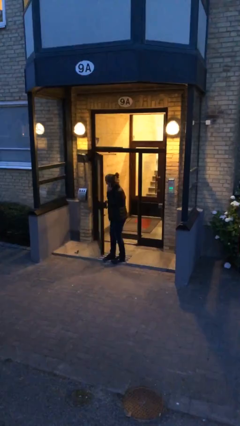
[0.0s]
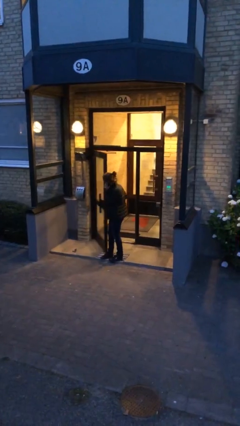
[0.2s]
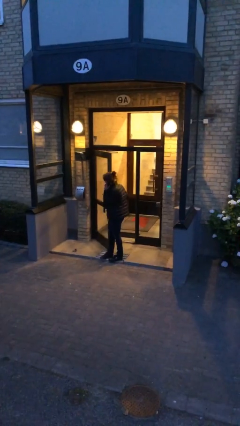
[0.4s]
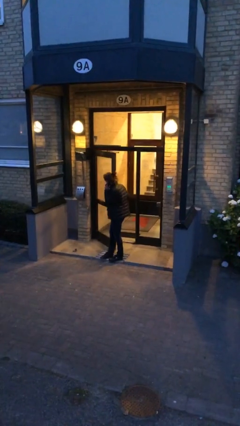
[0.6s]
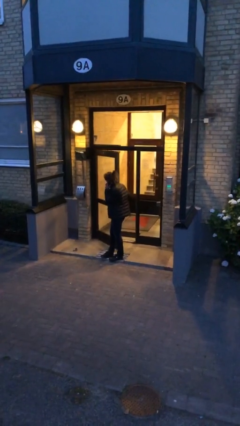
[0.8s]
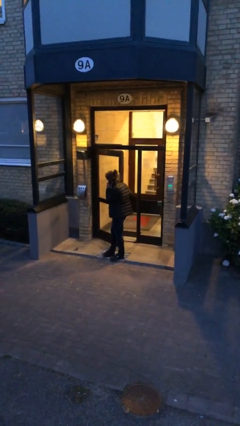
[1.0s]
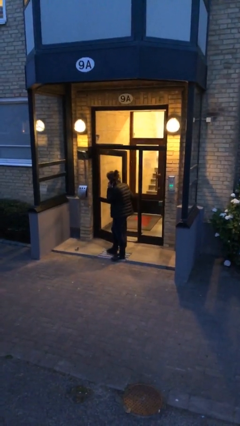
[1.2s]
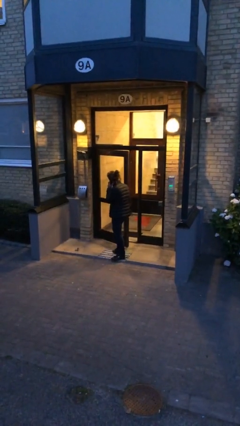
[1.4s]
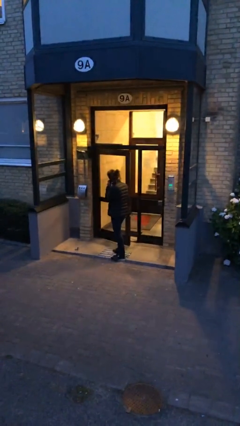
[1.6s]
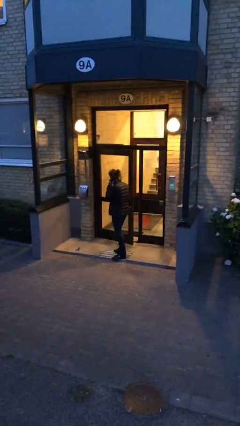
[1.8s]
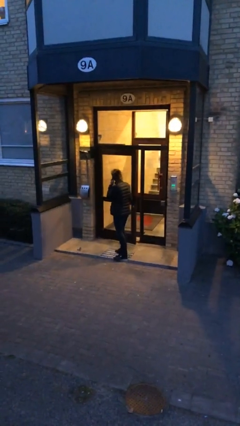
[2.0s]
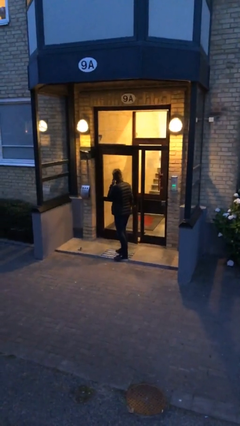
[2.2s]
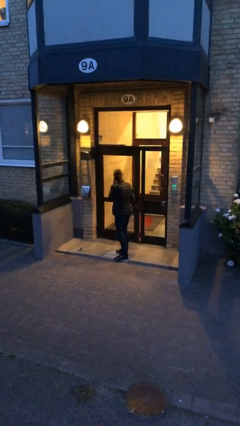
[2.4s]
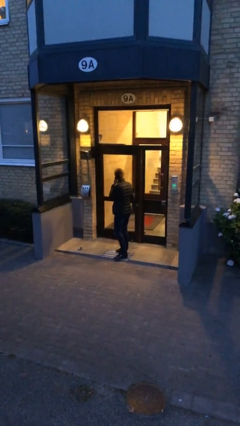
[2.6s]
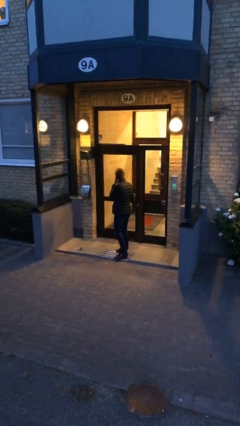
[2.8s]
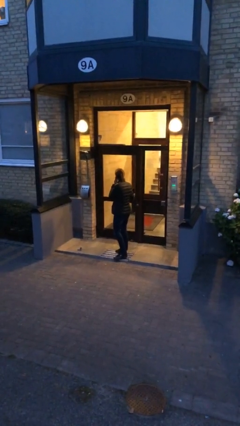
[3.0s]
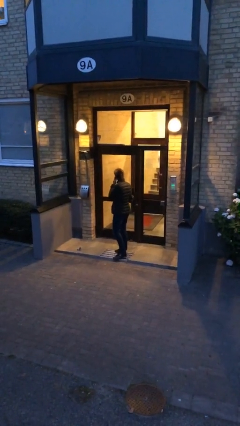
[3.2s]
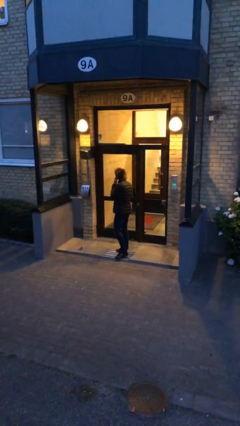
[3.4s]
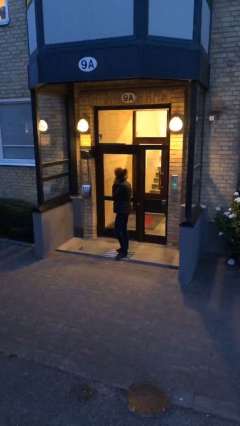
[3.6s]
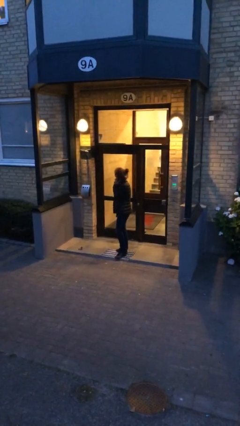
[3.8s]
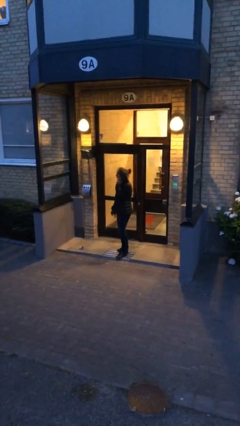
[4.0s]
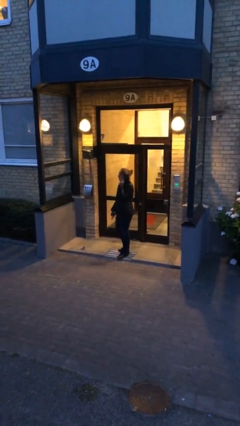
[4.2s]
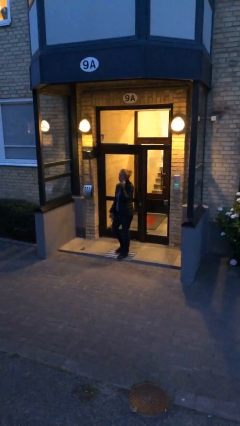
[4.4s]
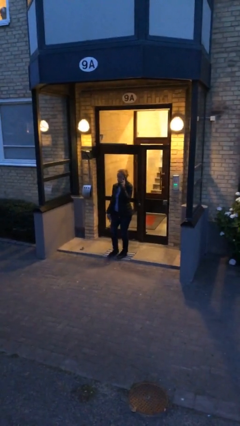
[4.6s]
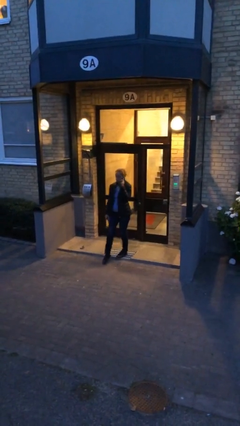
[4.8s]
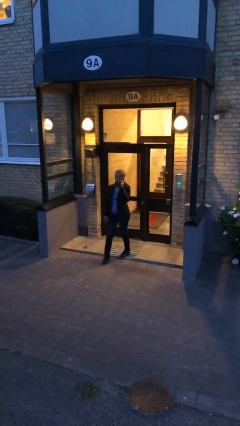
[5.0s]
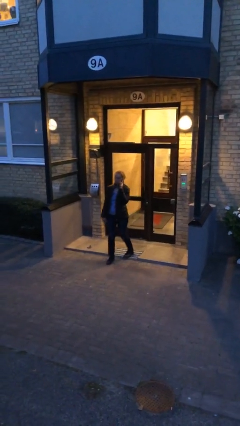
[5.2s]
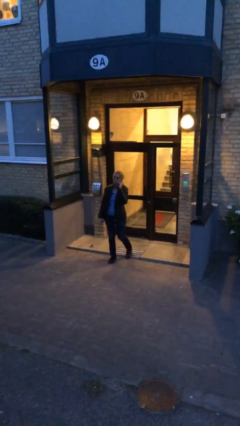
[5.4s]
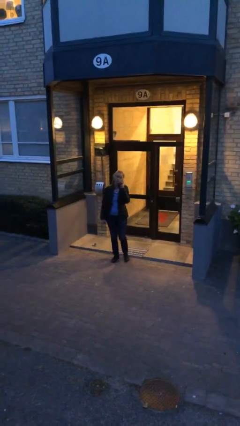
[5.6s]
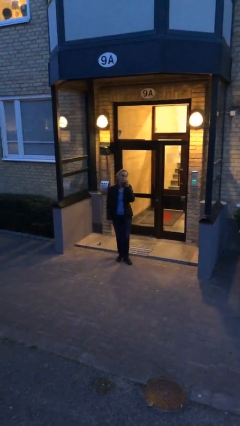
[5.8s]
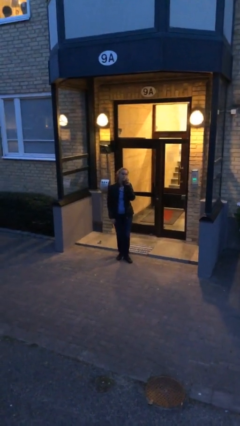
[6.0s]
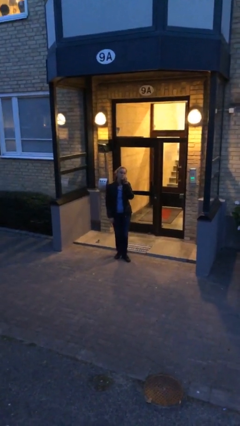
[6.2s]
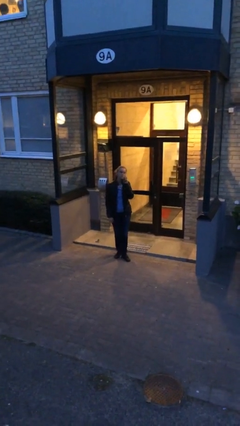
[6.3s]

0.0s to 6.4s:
person closes facility door

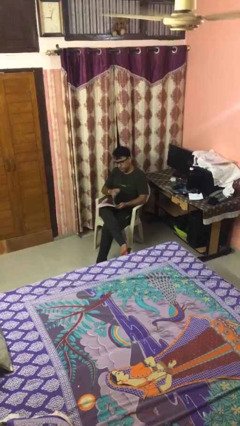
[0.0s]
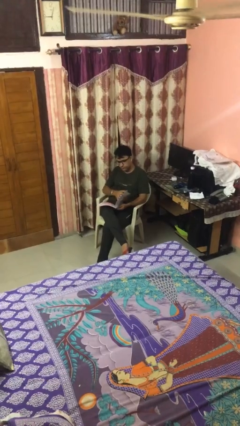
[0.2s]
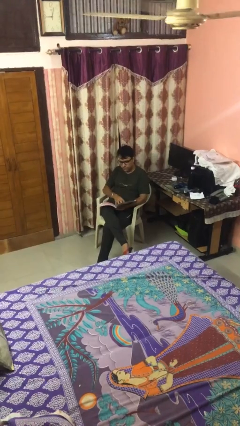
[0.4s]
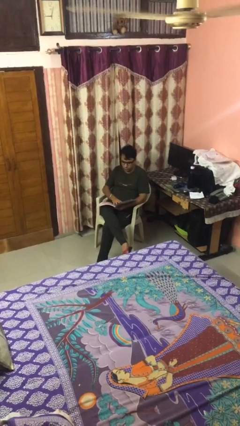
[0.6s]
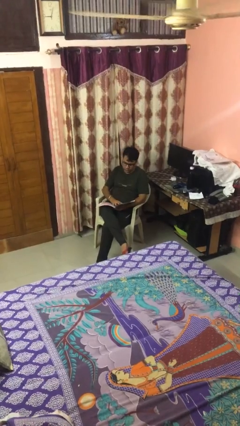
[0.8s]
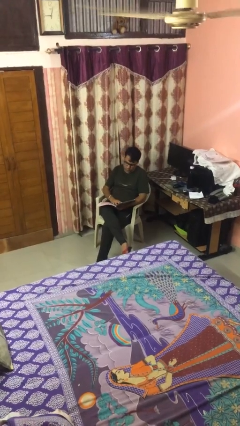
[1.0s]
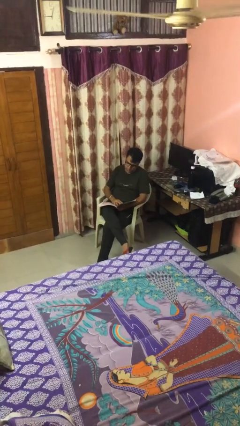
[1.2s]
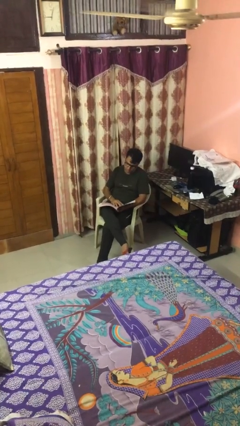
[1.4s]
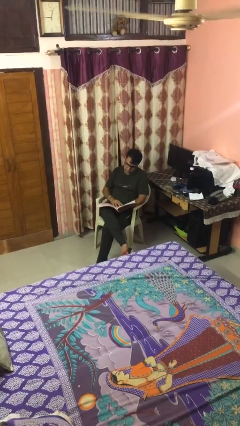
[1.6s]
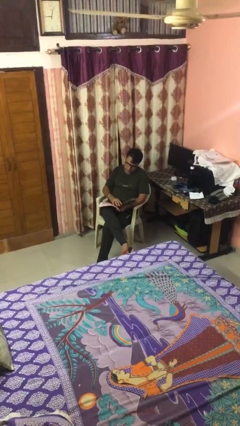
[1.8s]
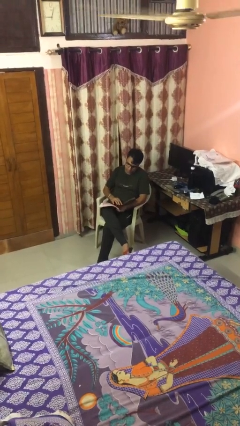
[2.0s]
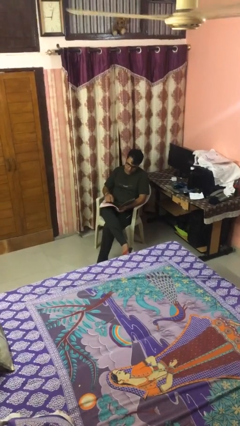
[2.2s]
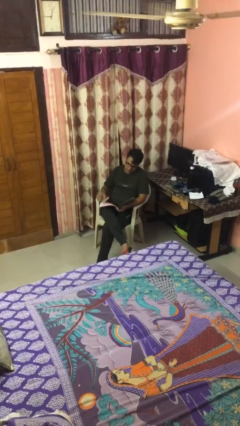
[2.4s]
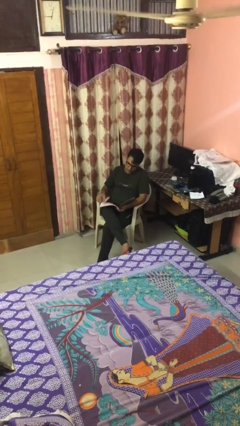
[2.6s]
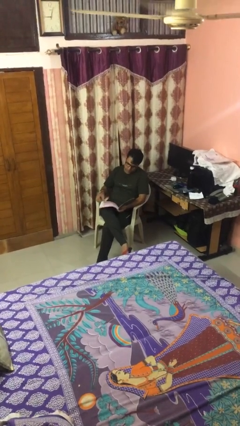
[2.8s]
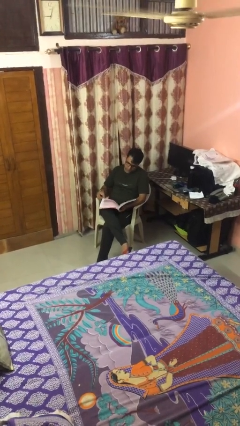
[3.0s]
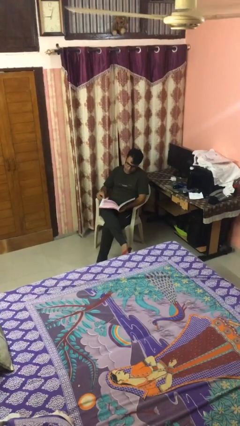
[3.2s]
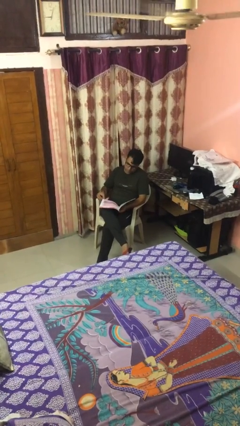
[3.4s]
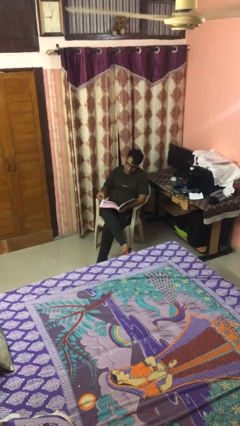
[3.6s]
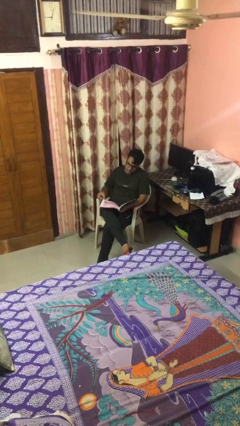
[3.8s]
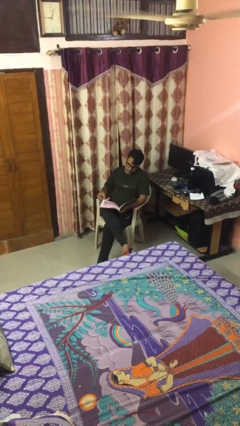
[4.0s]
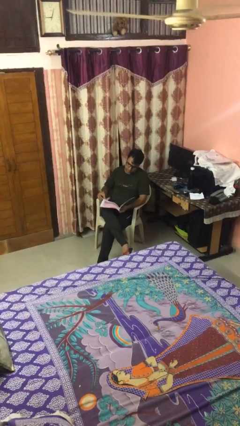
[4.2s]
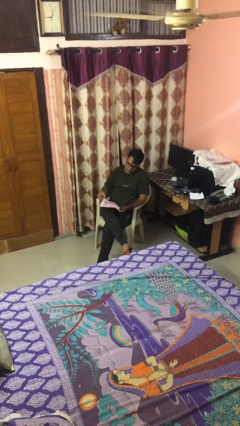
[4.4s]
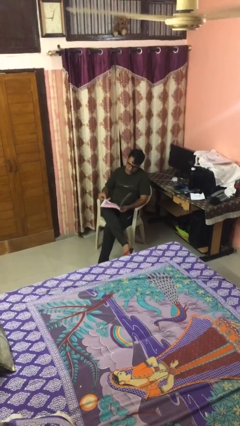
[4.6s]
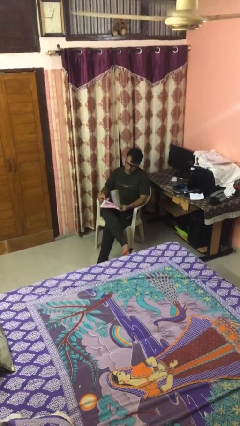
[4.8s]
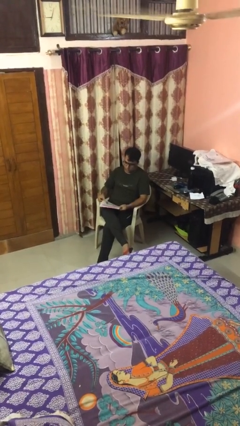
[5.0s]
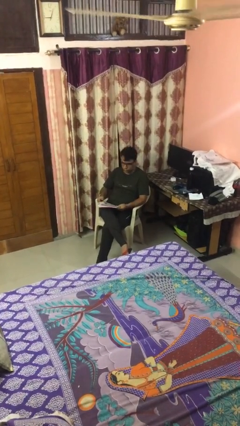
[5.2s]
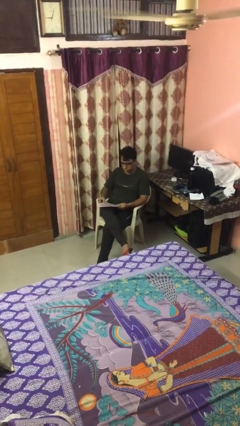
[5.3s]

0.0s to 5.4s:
person reads magazine

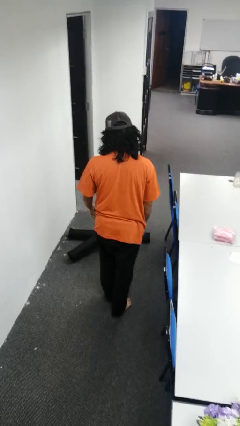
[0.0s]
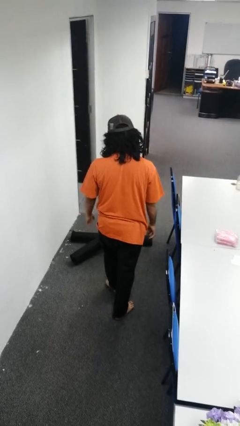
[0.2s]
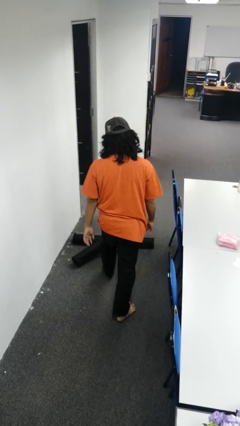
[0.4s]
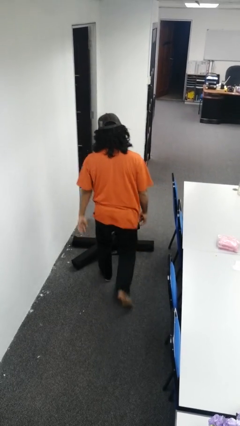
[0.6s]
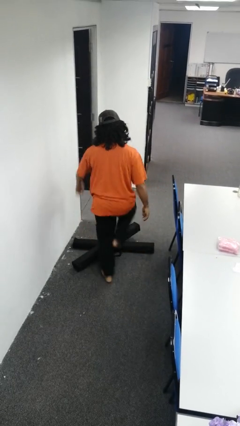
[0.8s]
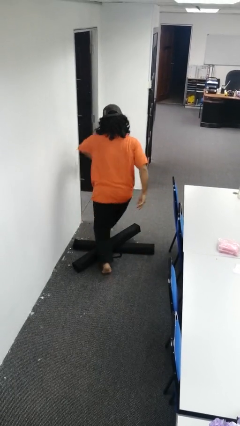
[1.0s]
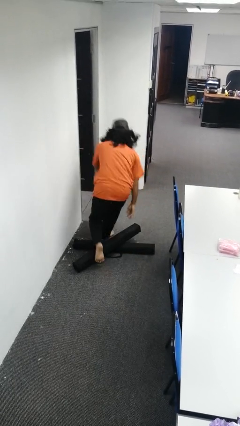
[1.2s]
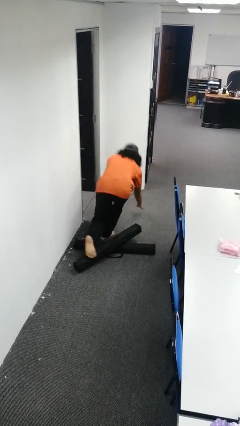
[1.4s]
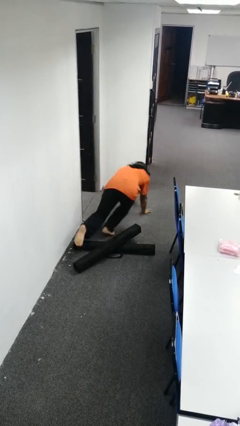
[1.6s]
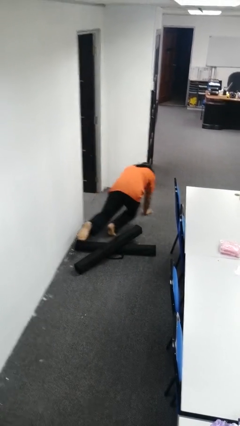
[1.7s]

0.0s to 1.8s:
person trips on object on floor

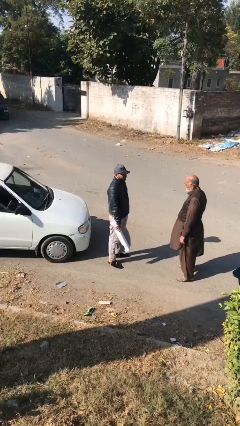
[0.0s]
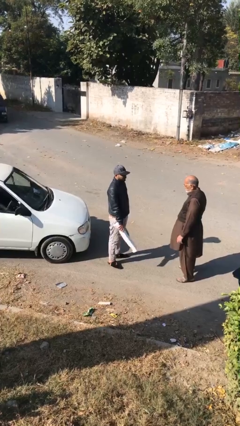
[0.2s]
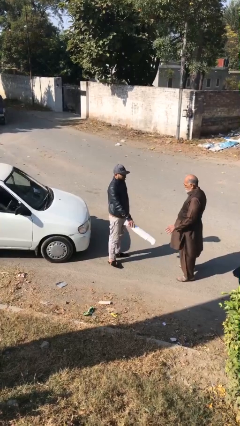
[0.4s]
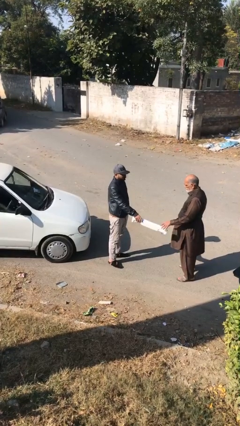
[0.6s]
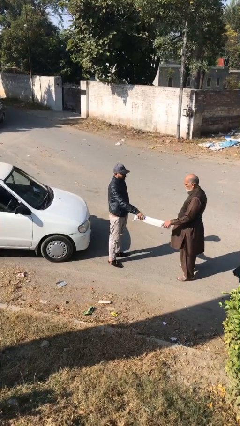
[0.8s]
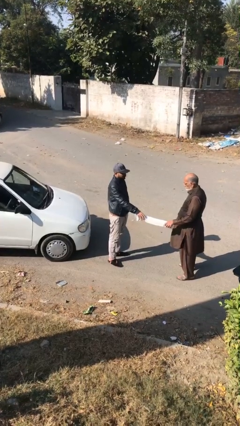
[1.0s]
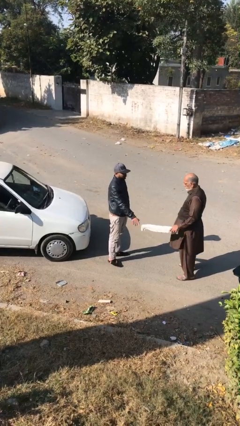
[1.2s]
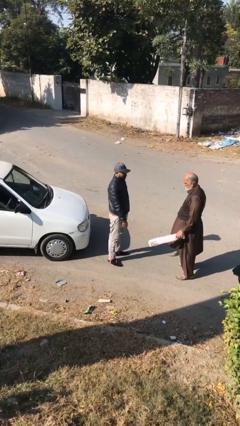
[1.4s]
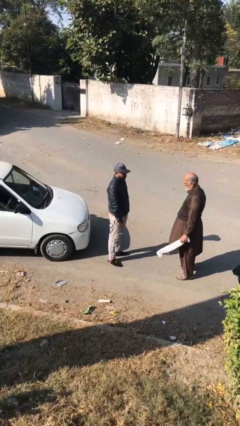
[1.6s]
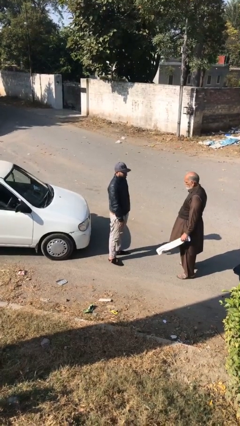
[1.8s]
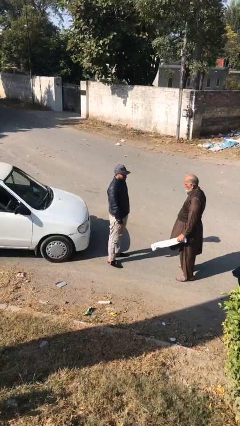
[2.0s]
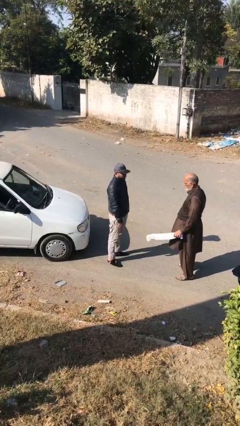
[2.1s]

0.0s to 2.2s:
person transfers object to person

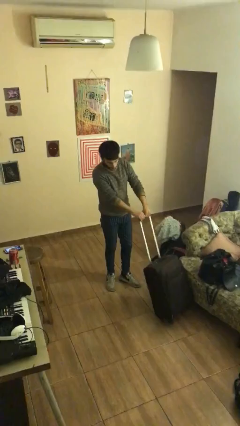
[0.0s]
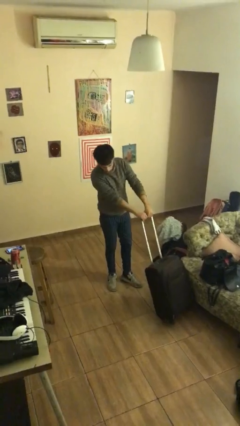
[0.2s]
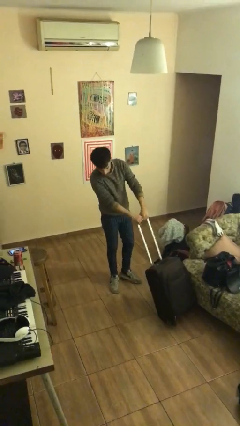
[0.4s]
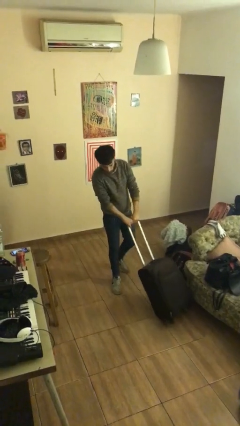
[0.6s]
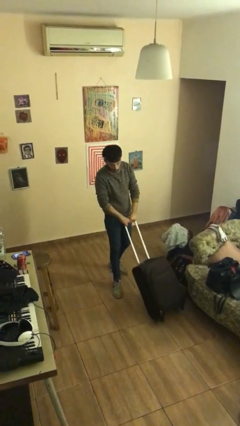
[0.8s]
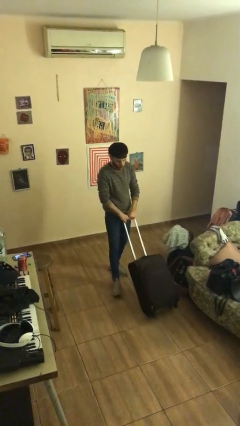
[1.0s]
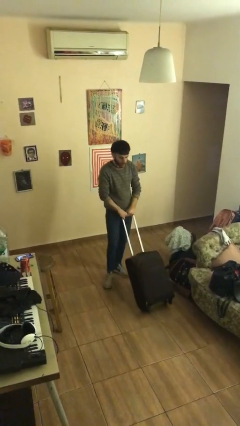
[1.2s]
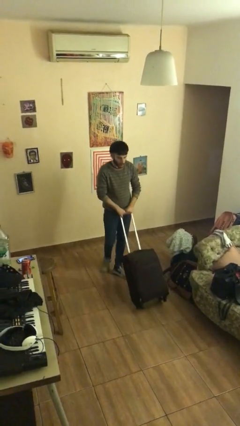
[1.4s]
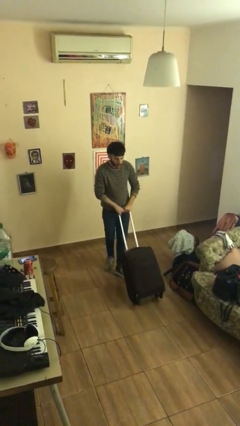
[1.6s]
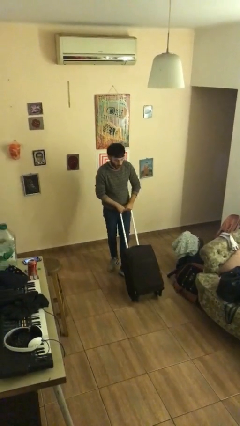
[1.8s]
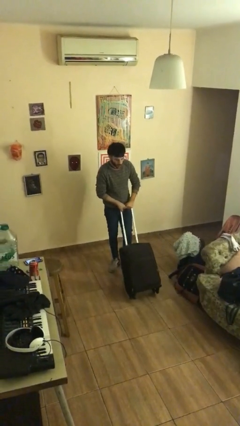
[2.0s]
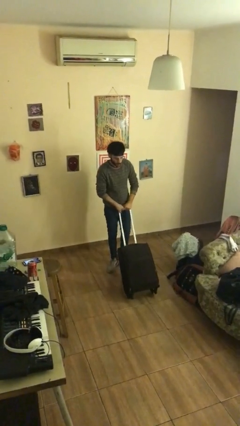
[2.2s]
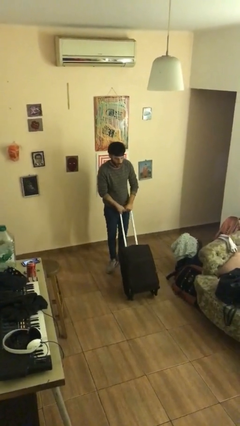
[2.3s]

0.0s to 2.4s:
person pulls wheeled cart
